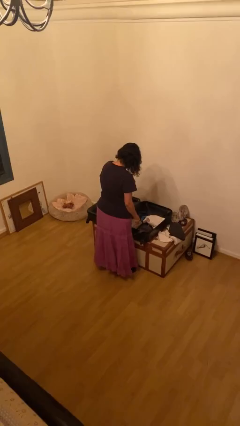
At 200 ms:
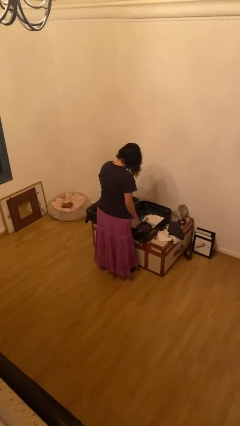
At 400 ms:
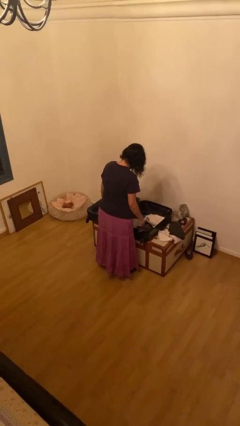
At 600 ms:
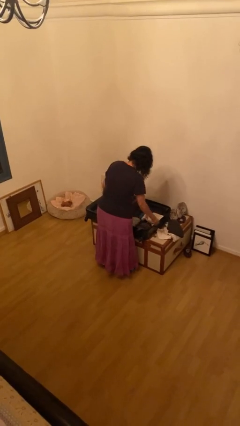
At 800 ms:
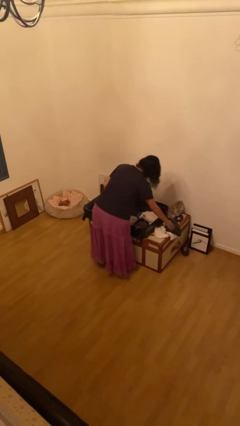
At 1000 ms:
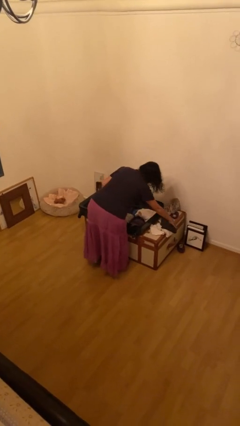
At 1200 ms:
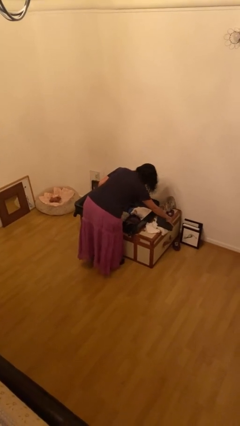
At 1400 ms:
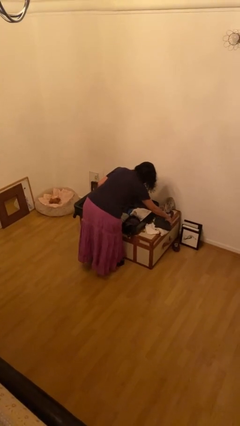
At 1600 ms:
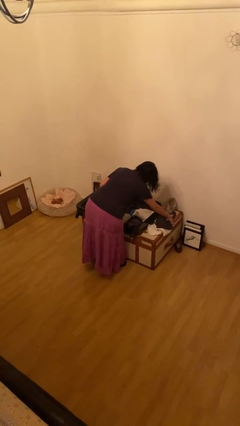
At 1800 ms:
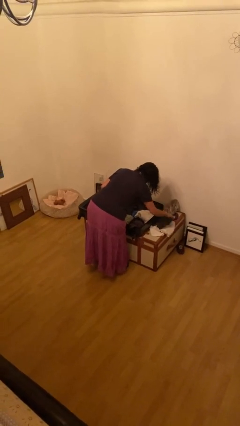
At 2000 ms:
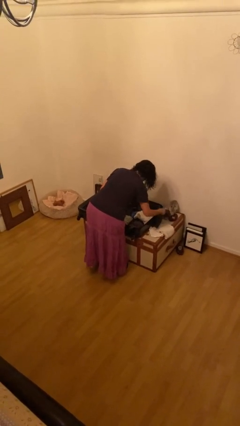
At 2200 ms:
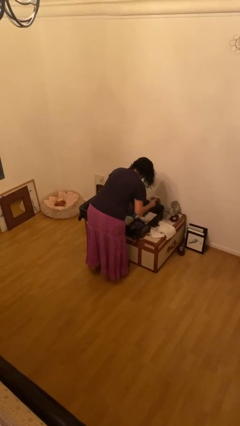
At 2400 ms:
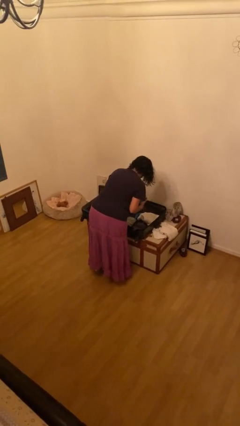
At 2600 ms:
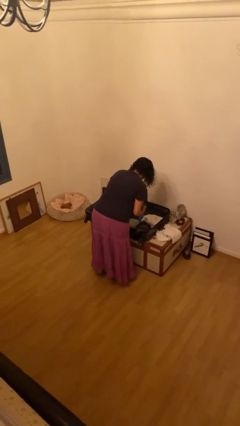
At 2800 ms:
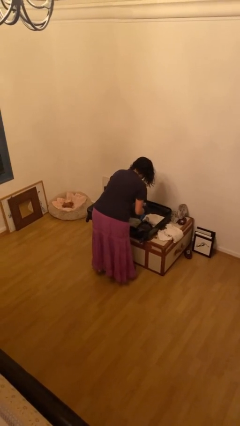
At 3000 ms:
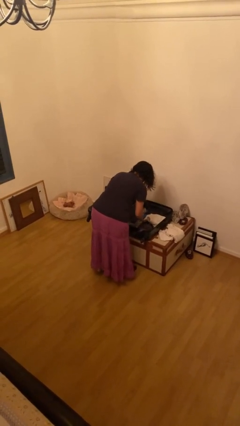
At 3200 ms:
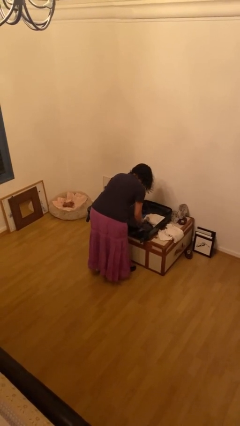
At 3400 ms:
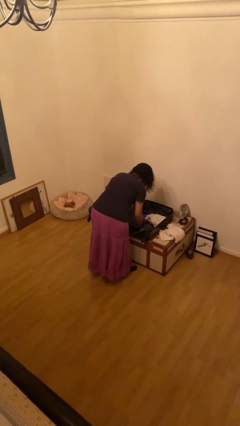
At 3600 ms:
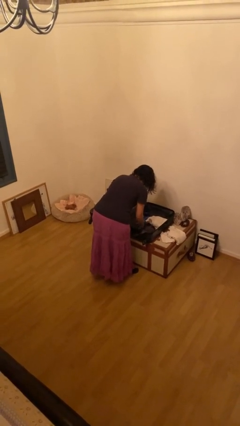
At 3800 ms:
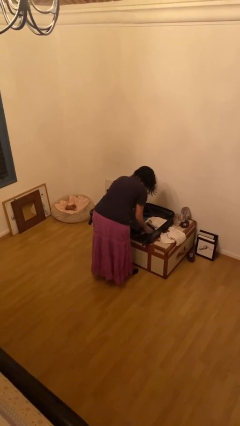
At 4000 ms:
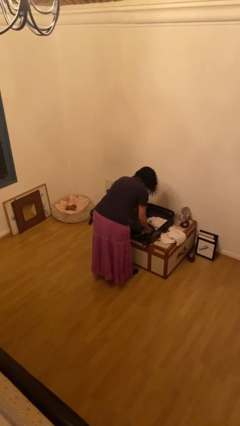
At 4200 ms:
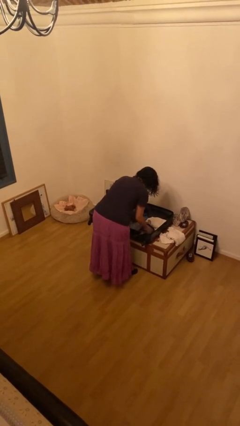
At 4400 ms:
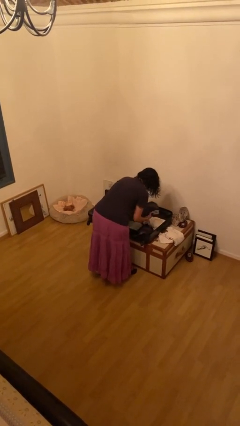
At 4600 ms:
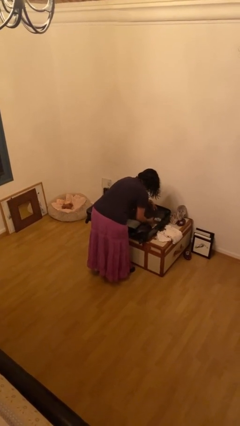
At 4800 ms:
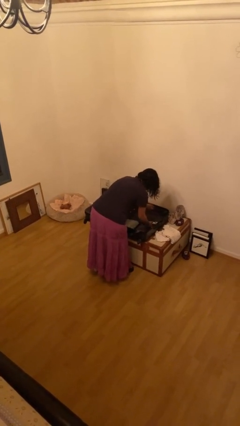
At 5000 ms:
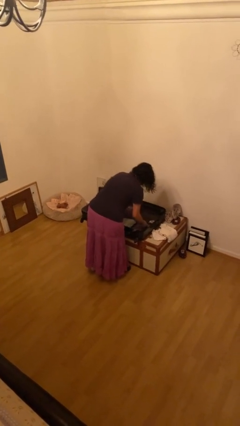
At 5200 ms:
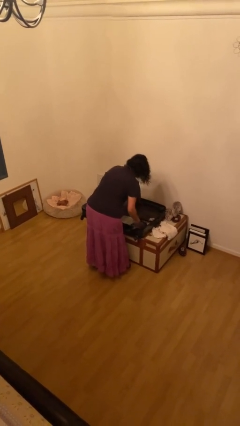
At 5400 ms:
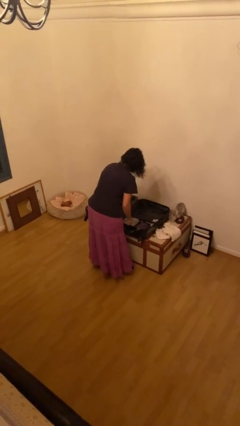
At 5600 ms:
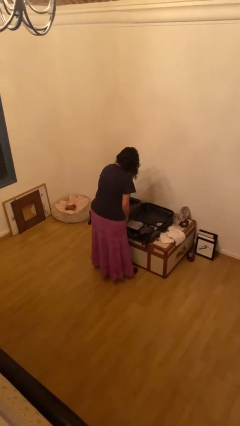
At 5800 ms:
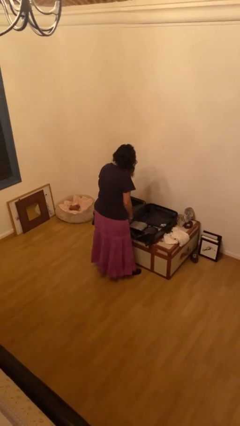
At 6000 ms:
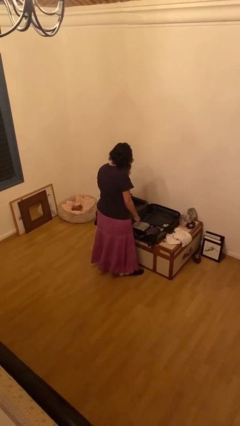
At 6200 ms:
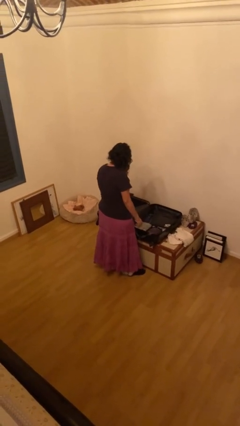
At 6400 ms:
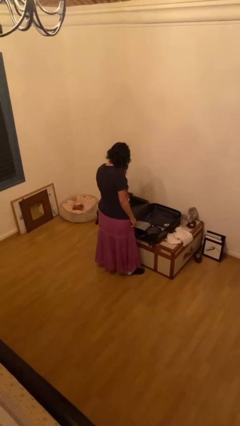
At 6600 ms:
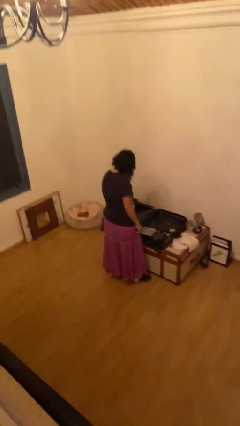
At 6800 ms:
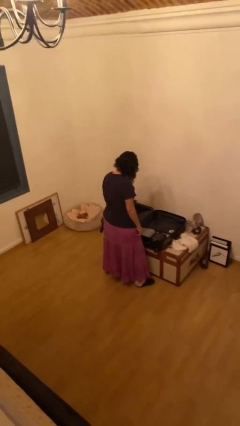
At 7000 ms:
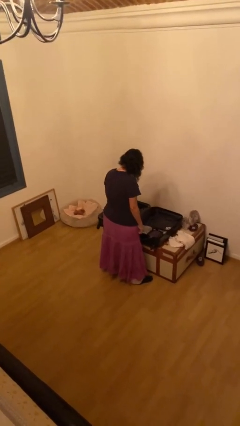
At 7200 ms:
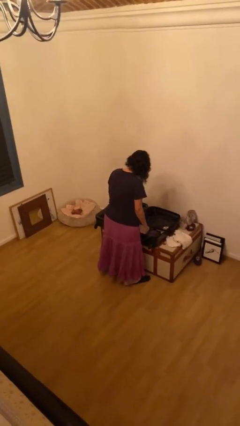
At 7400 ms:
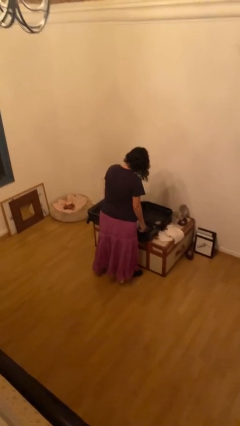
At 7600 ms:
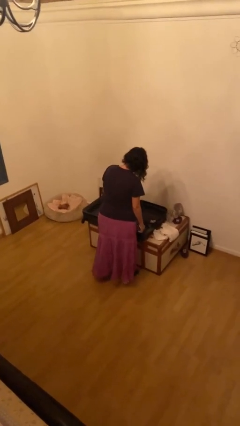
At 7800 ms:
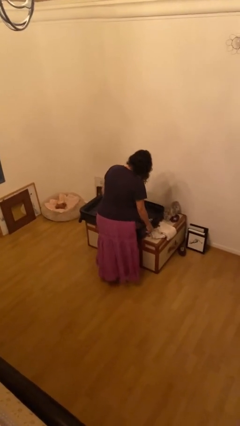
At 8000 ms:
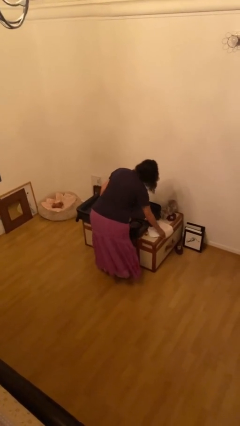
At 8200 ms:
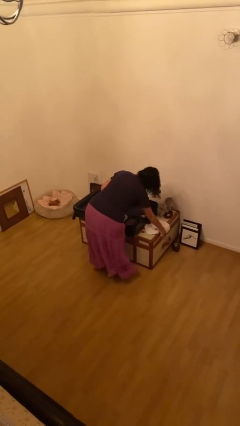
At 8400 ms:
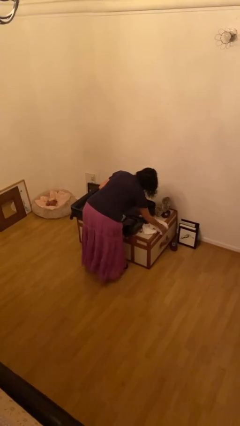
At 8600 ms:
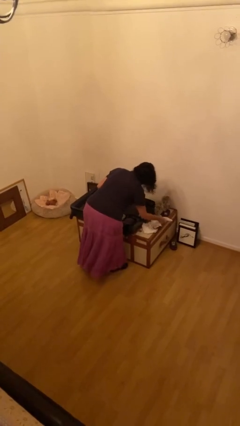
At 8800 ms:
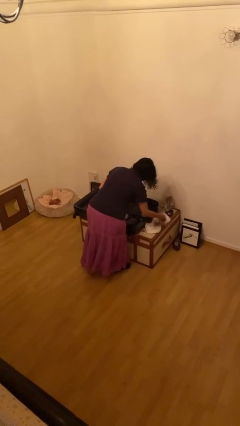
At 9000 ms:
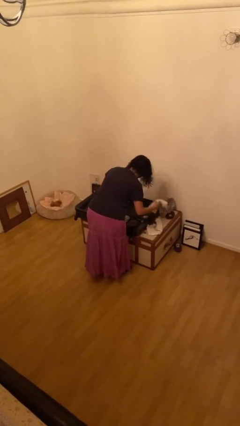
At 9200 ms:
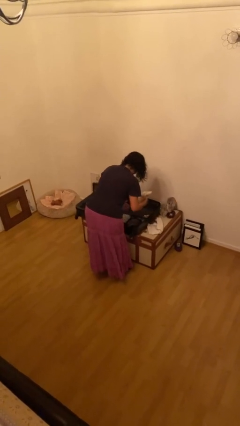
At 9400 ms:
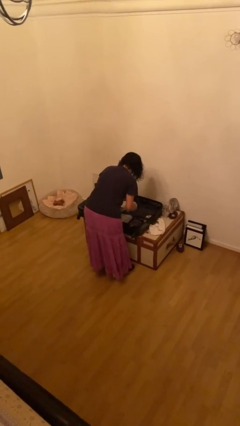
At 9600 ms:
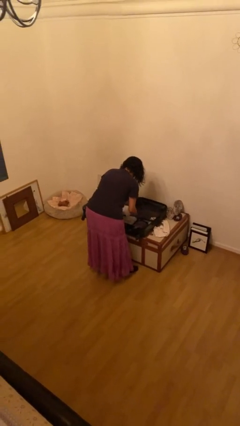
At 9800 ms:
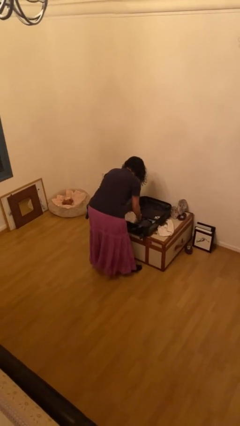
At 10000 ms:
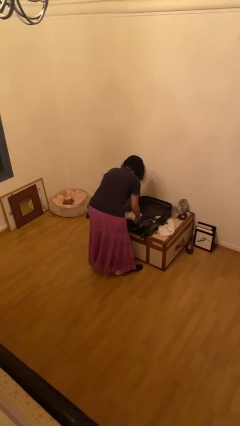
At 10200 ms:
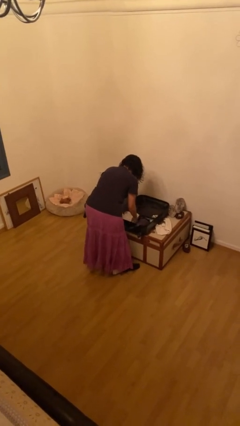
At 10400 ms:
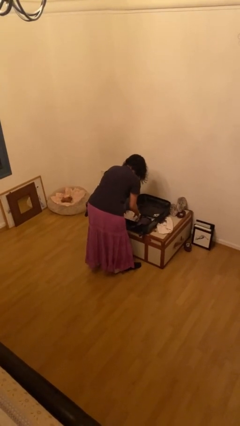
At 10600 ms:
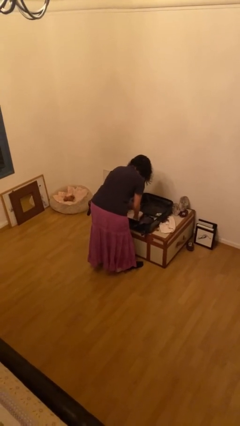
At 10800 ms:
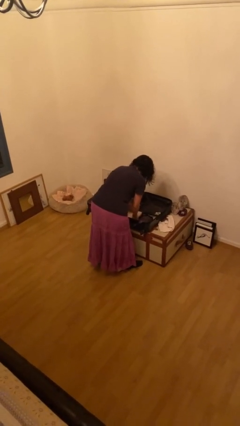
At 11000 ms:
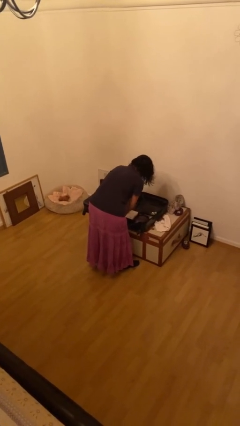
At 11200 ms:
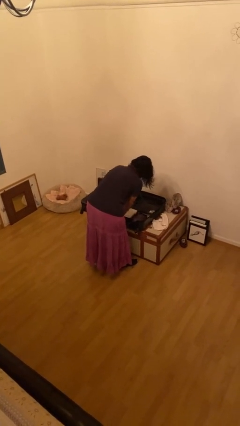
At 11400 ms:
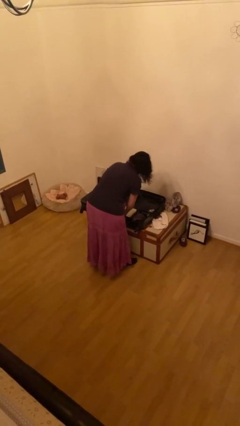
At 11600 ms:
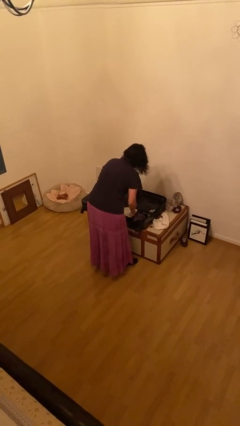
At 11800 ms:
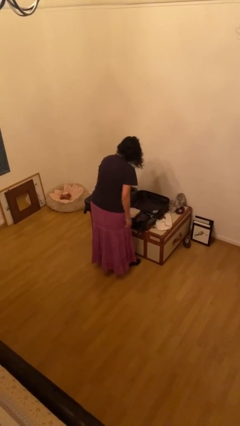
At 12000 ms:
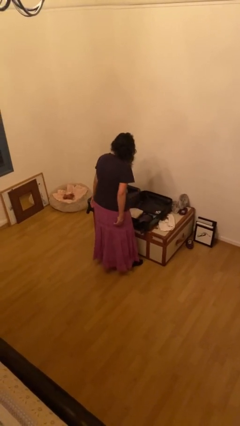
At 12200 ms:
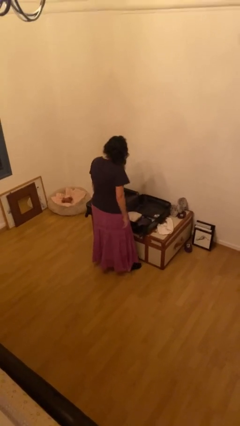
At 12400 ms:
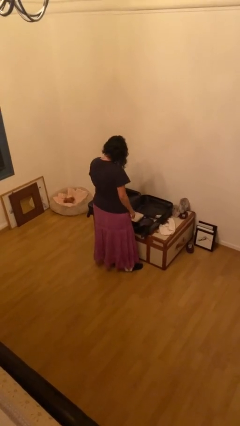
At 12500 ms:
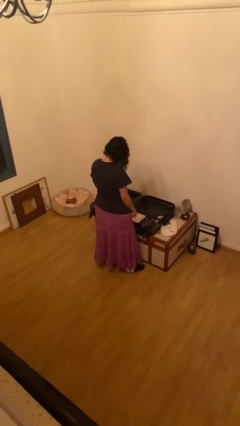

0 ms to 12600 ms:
person unloads clothes from suitcase

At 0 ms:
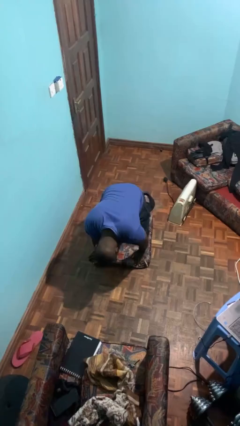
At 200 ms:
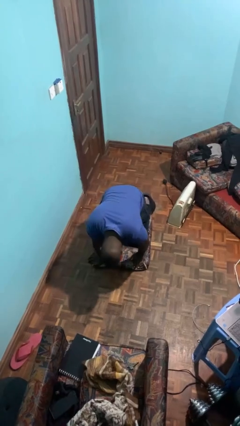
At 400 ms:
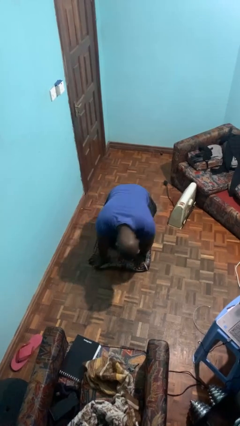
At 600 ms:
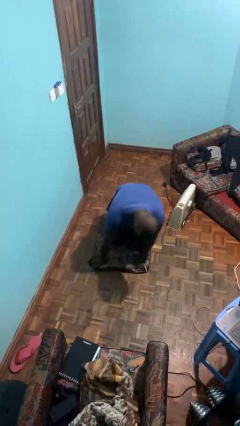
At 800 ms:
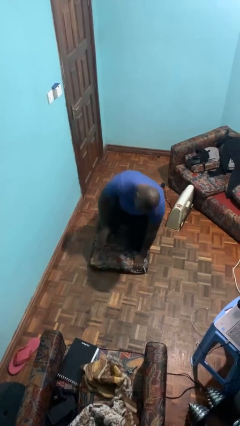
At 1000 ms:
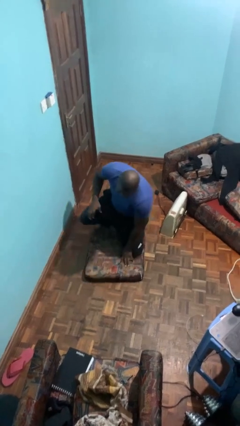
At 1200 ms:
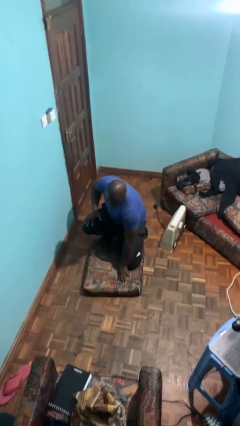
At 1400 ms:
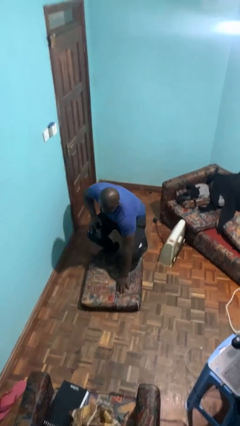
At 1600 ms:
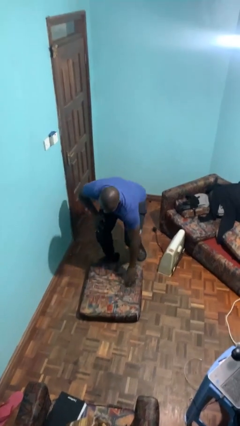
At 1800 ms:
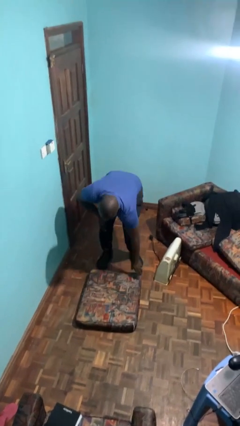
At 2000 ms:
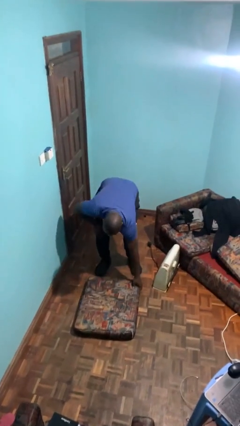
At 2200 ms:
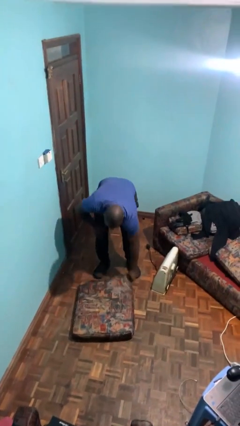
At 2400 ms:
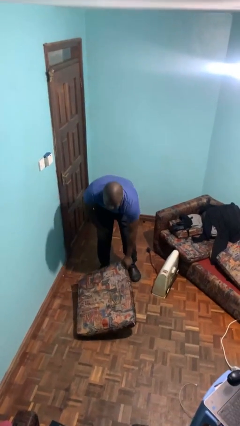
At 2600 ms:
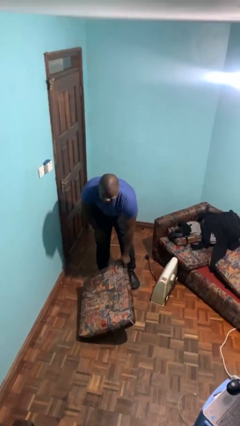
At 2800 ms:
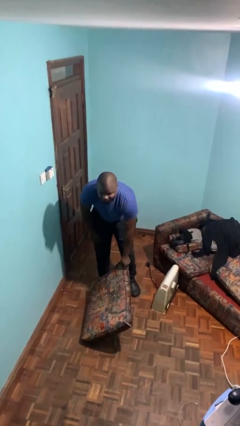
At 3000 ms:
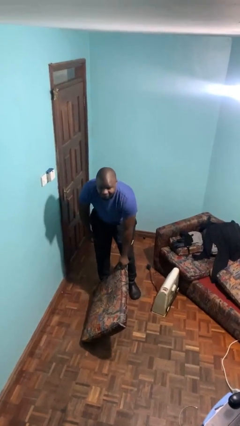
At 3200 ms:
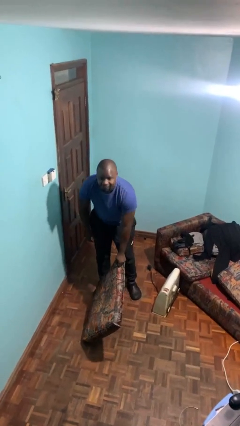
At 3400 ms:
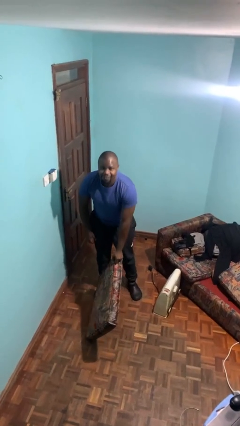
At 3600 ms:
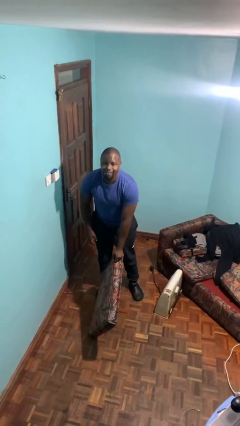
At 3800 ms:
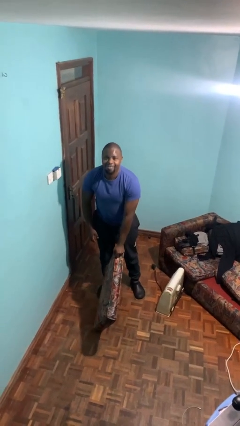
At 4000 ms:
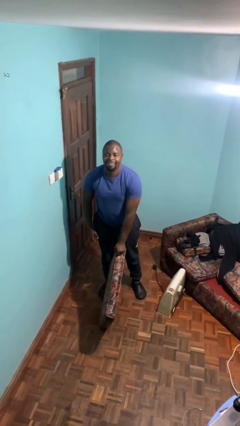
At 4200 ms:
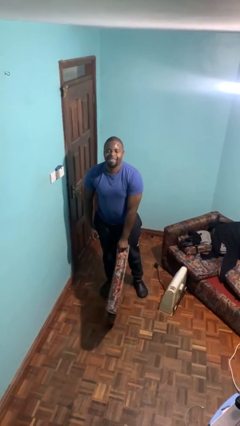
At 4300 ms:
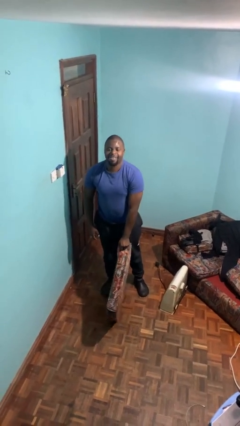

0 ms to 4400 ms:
person stands up from floor

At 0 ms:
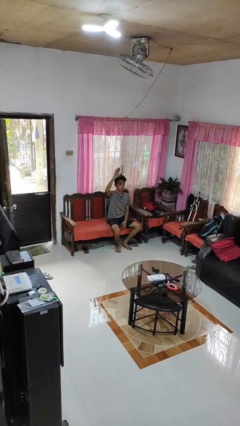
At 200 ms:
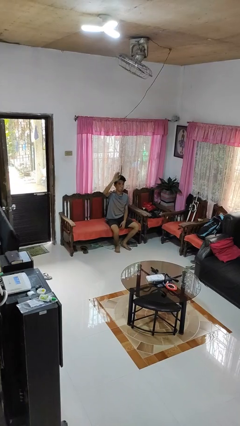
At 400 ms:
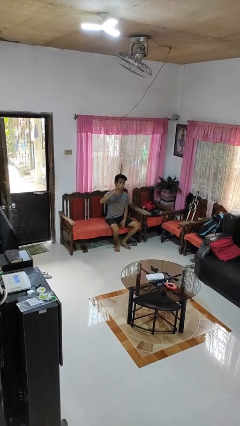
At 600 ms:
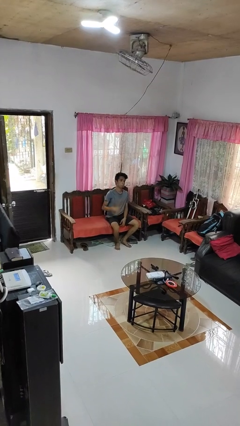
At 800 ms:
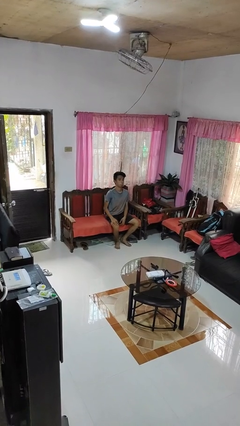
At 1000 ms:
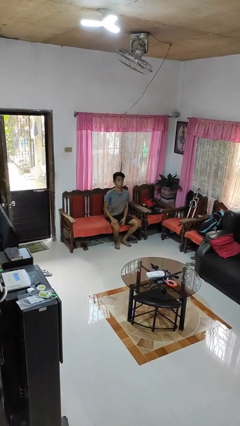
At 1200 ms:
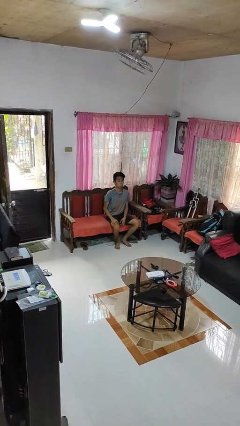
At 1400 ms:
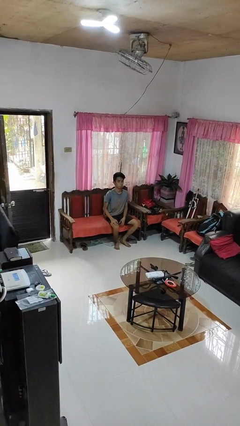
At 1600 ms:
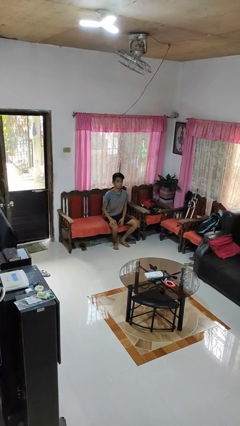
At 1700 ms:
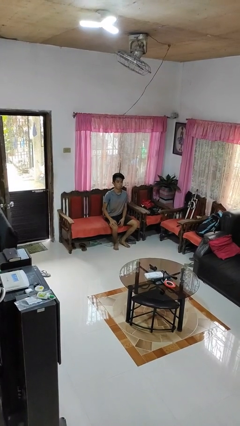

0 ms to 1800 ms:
person gestures lower hand
